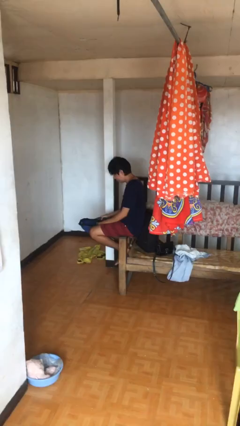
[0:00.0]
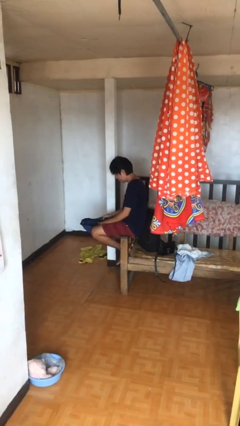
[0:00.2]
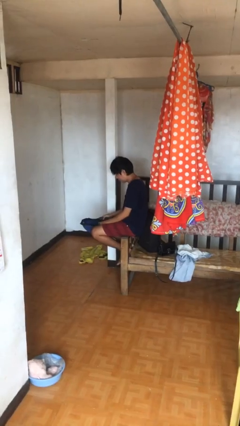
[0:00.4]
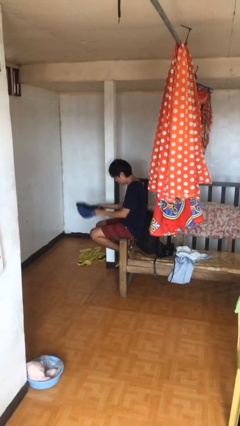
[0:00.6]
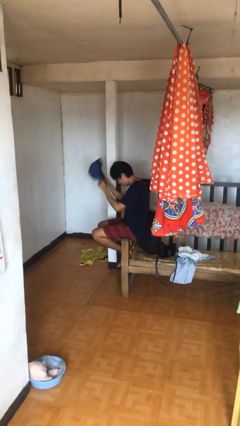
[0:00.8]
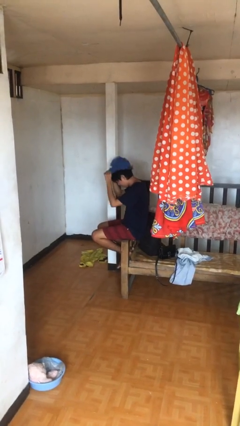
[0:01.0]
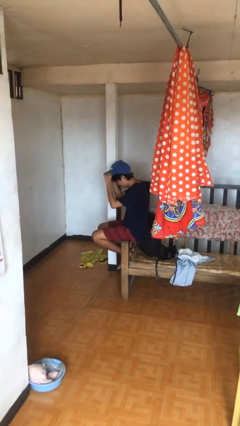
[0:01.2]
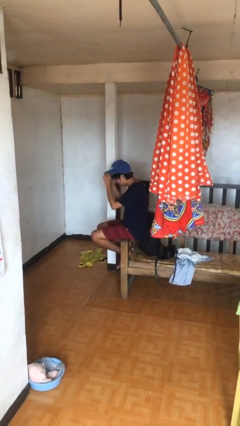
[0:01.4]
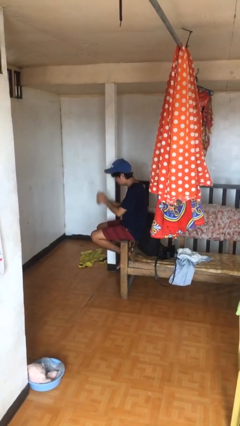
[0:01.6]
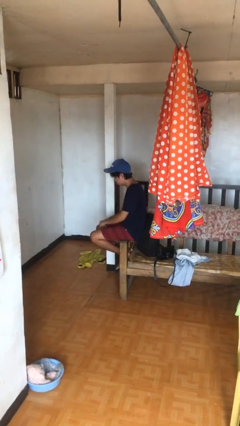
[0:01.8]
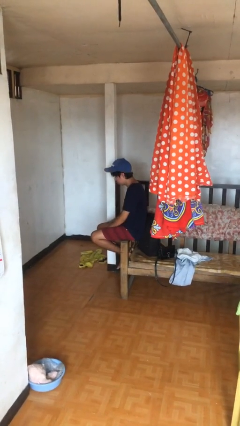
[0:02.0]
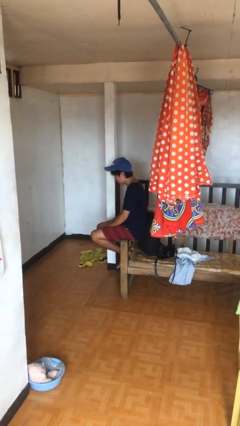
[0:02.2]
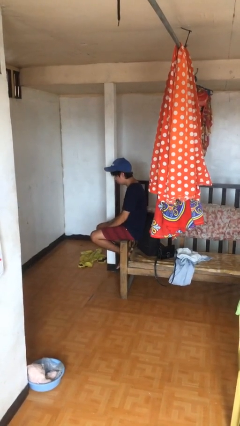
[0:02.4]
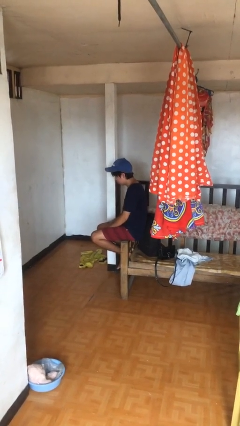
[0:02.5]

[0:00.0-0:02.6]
person puts on hat

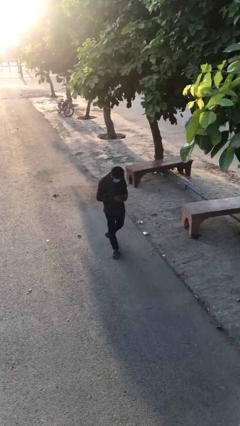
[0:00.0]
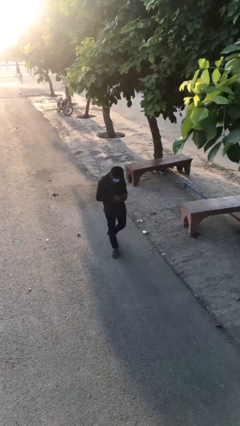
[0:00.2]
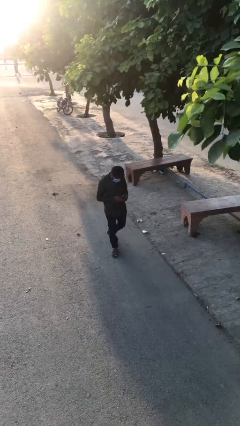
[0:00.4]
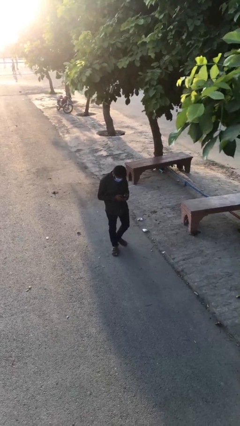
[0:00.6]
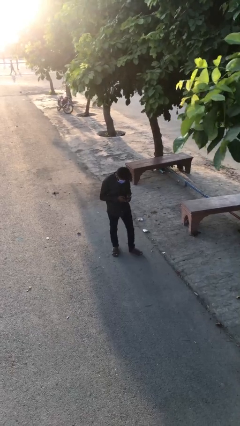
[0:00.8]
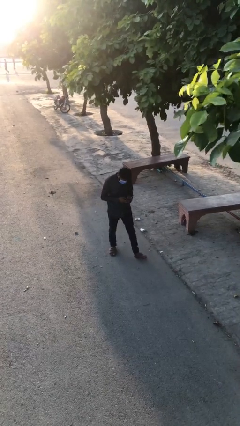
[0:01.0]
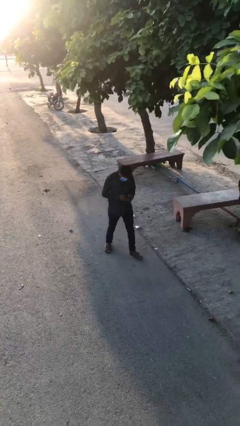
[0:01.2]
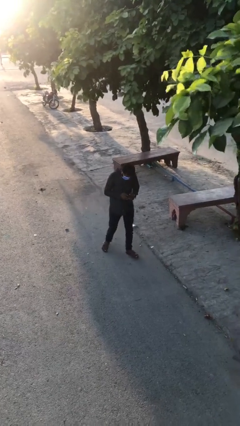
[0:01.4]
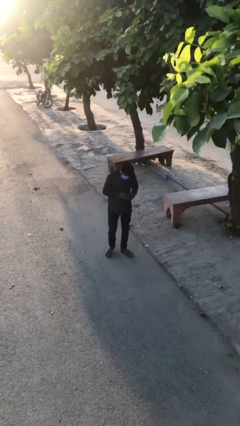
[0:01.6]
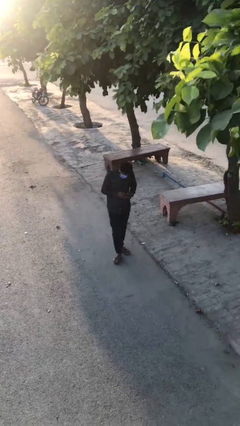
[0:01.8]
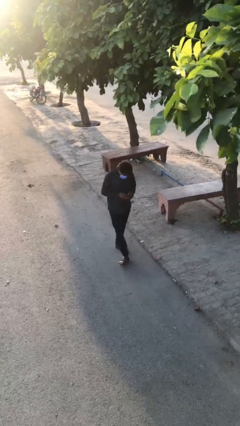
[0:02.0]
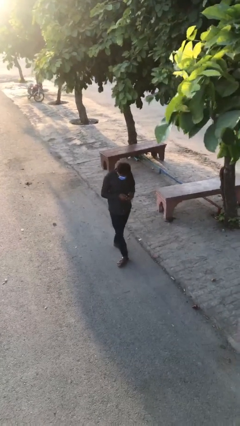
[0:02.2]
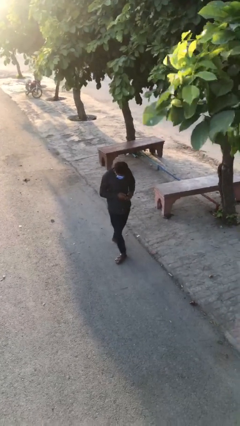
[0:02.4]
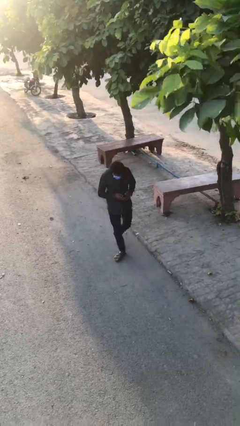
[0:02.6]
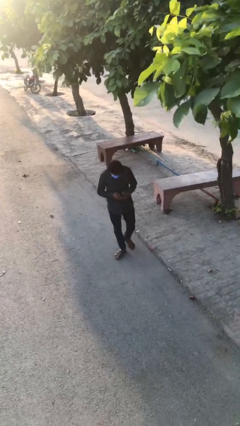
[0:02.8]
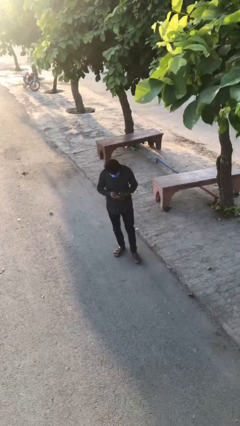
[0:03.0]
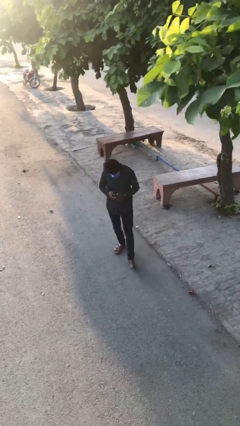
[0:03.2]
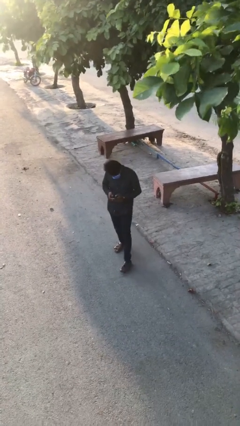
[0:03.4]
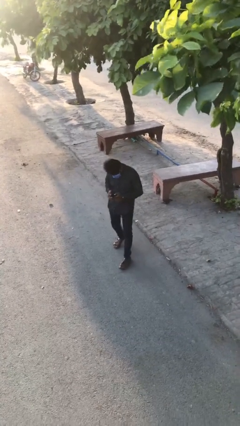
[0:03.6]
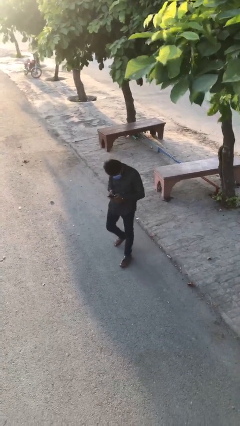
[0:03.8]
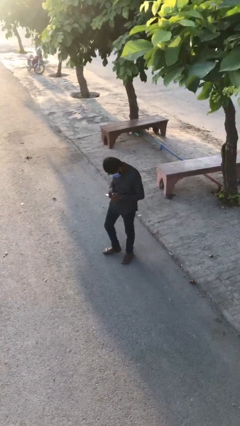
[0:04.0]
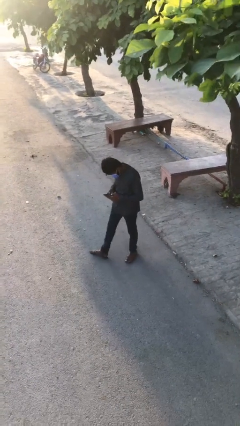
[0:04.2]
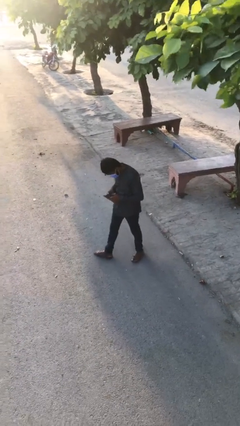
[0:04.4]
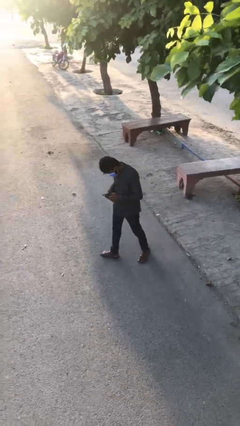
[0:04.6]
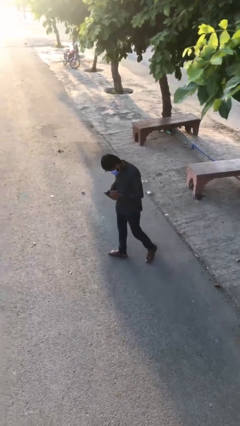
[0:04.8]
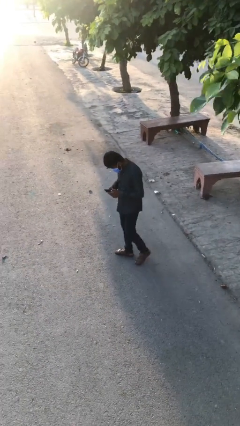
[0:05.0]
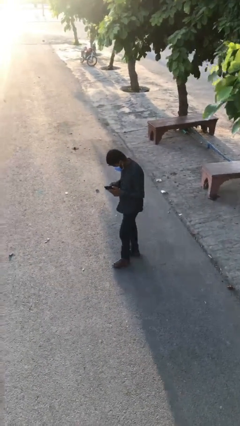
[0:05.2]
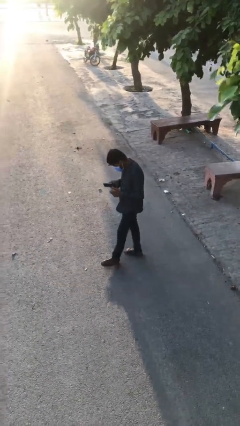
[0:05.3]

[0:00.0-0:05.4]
person texts on phone

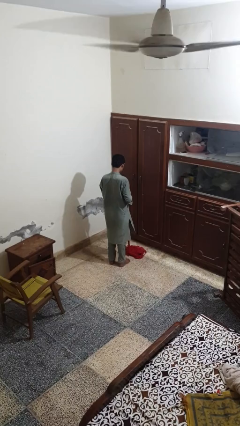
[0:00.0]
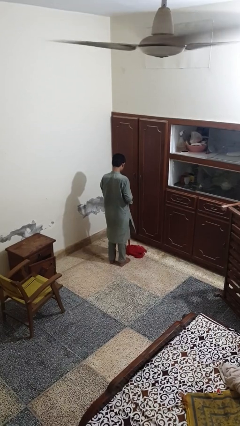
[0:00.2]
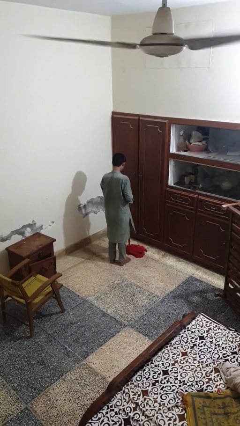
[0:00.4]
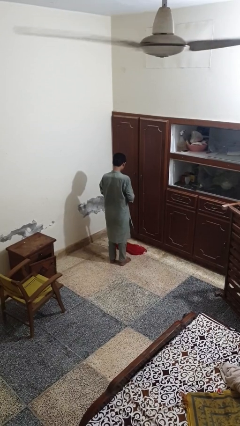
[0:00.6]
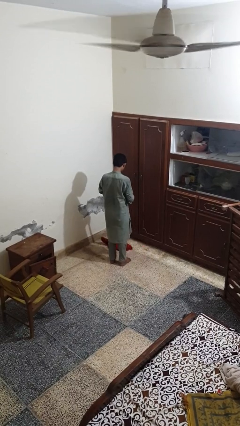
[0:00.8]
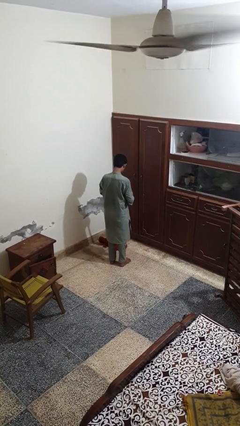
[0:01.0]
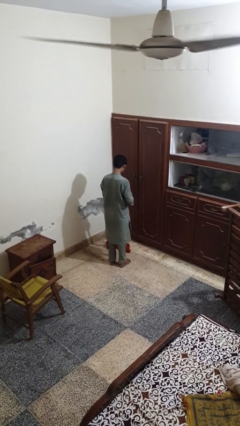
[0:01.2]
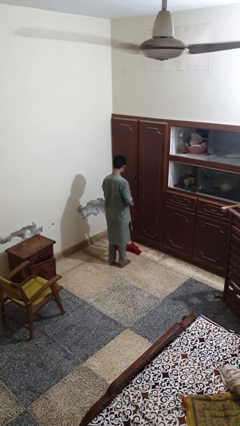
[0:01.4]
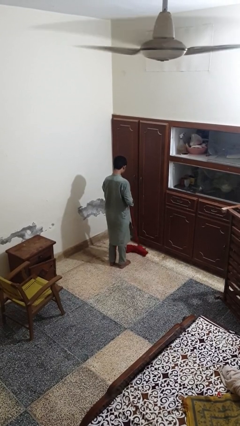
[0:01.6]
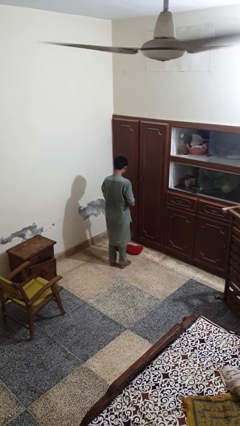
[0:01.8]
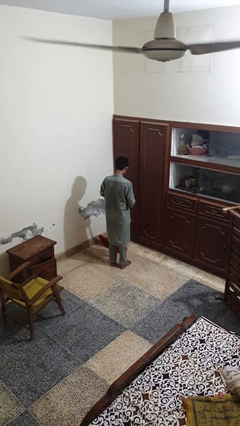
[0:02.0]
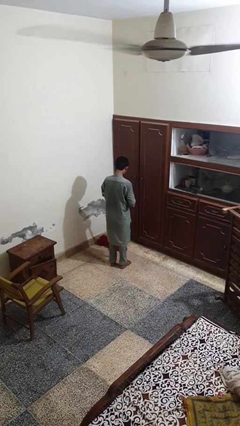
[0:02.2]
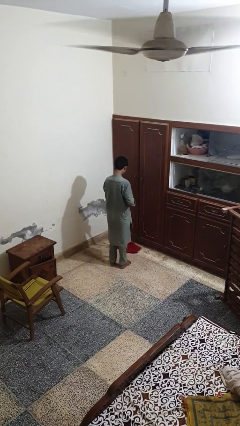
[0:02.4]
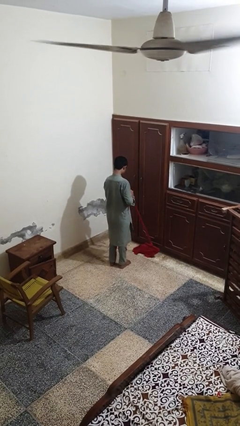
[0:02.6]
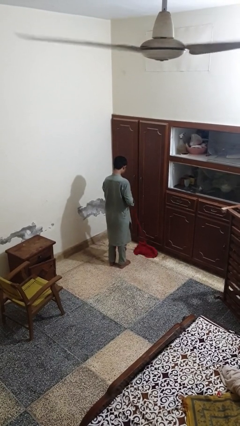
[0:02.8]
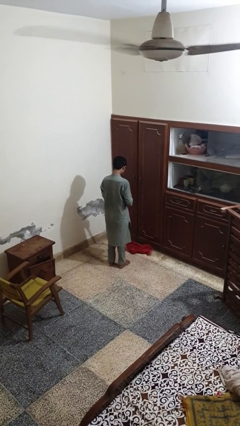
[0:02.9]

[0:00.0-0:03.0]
person mops

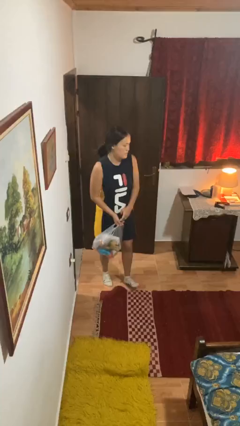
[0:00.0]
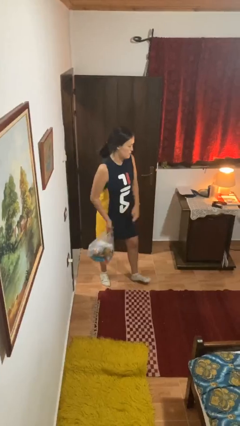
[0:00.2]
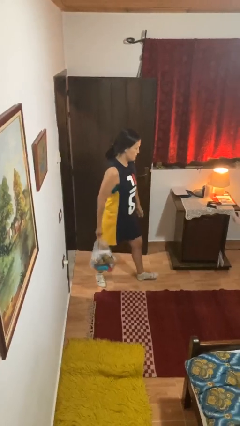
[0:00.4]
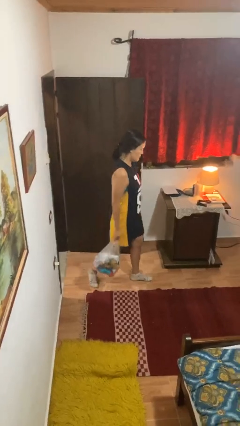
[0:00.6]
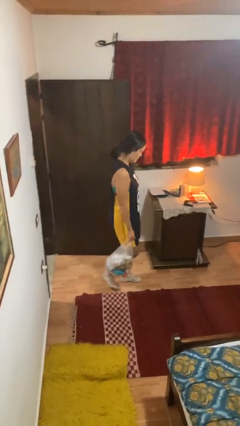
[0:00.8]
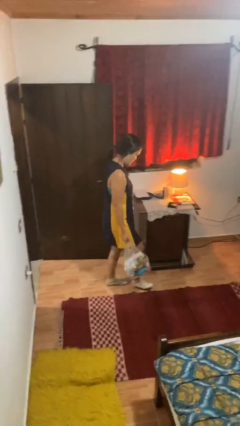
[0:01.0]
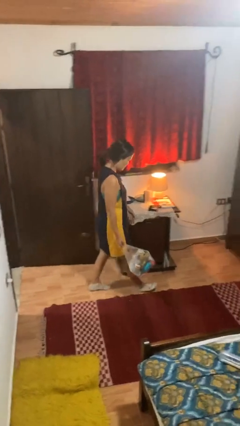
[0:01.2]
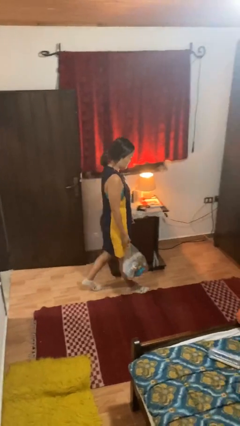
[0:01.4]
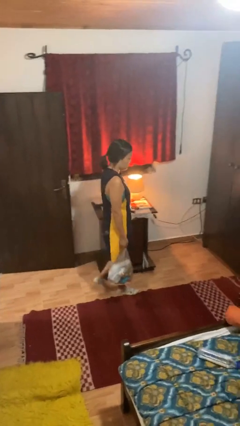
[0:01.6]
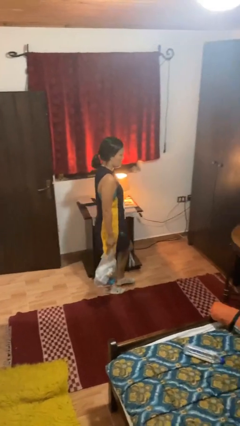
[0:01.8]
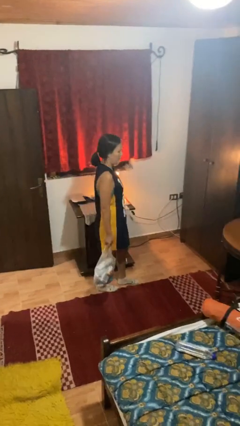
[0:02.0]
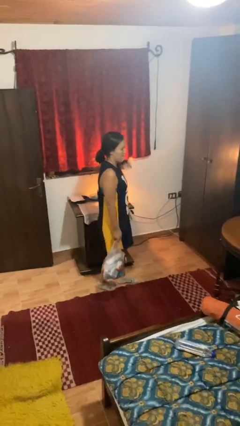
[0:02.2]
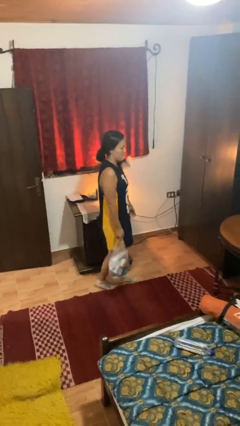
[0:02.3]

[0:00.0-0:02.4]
person carries groceries

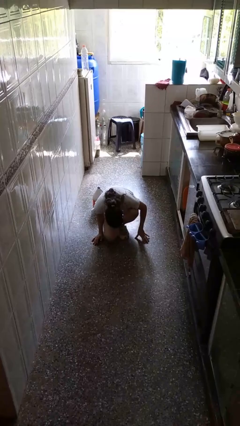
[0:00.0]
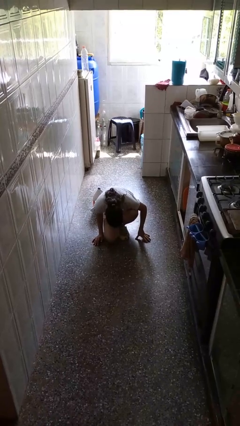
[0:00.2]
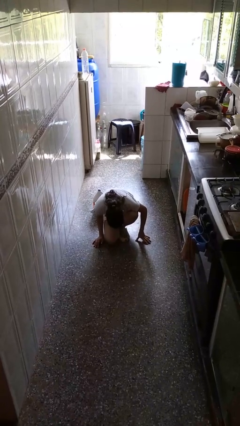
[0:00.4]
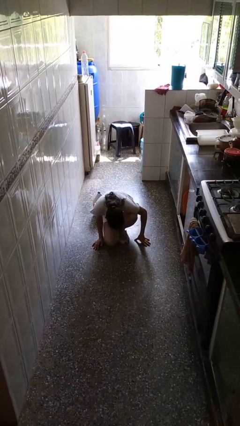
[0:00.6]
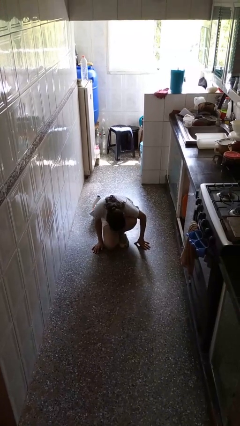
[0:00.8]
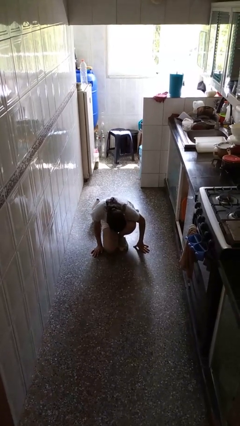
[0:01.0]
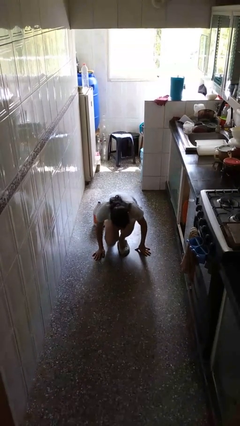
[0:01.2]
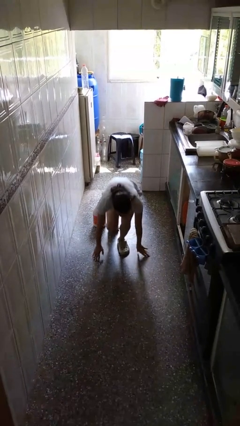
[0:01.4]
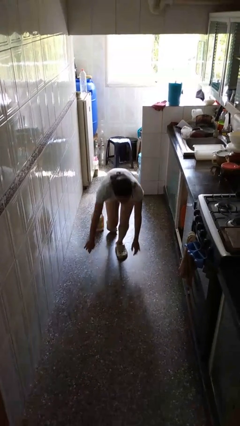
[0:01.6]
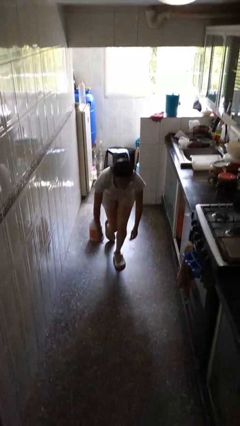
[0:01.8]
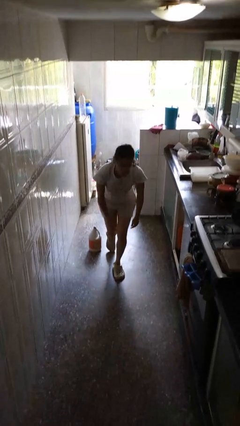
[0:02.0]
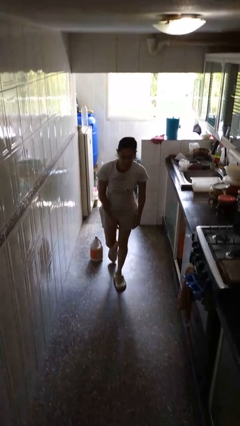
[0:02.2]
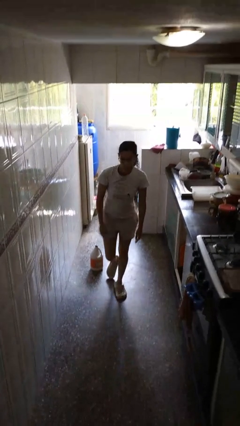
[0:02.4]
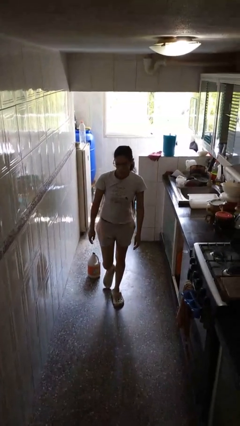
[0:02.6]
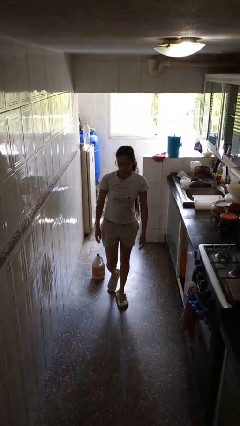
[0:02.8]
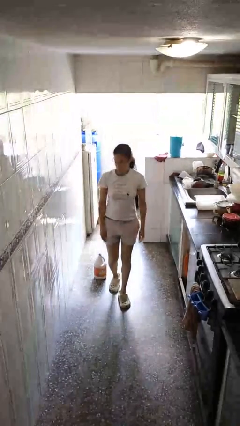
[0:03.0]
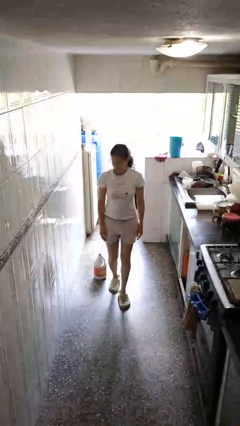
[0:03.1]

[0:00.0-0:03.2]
person stands up from floor

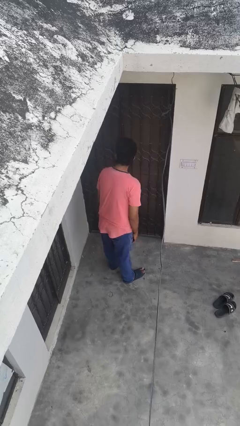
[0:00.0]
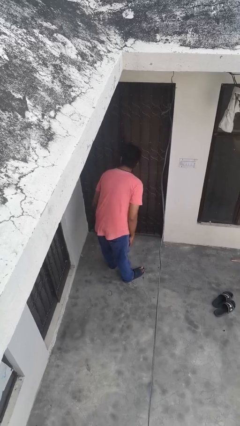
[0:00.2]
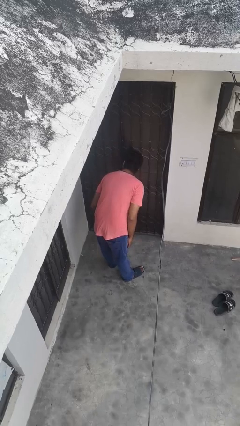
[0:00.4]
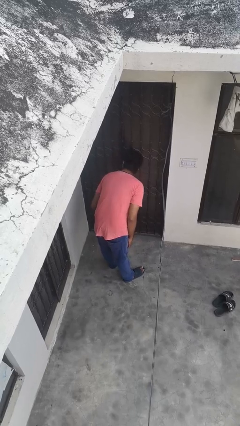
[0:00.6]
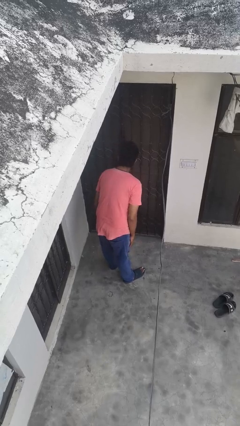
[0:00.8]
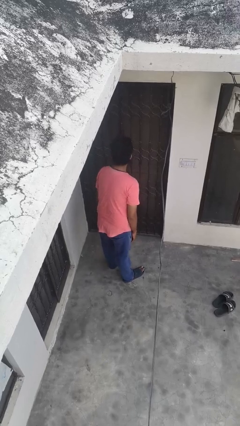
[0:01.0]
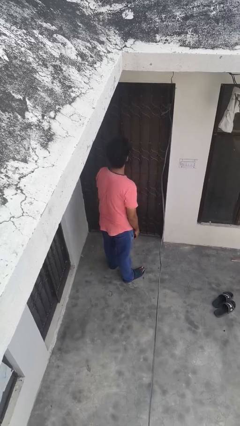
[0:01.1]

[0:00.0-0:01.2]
person bows
